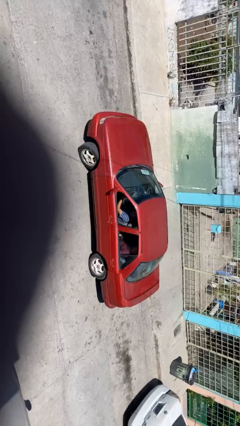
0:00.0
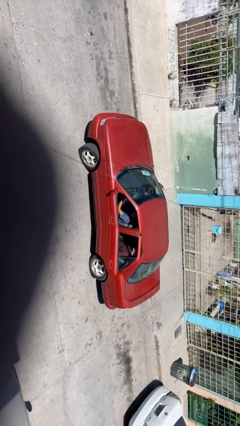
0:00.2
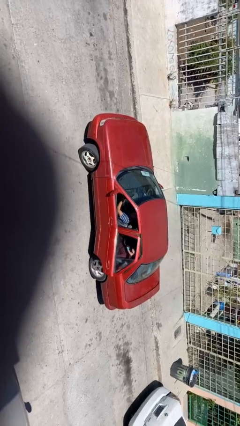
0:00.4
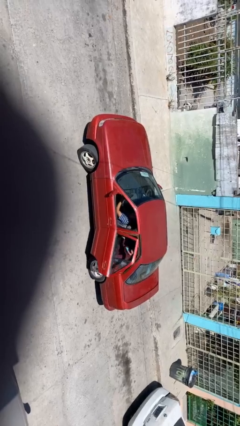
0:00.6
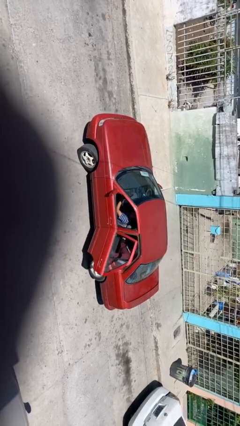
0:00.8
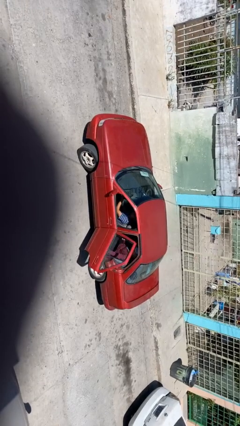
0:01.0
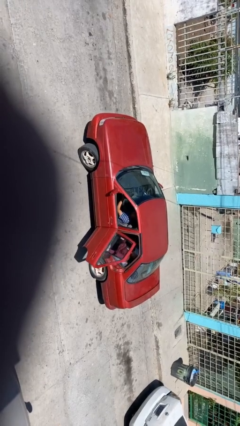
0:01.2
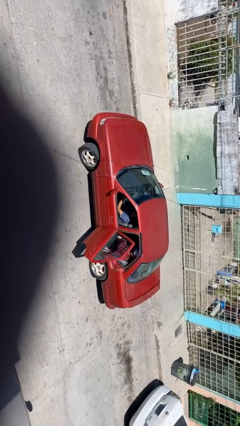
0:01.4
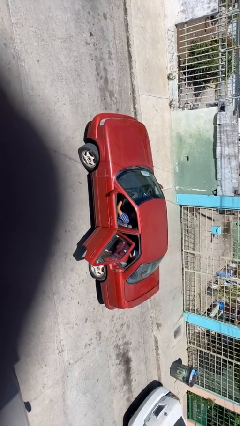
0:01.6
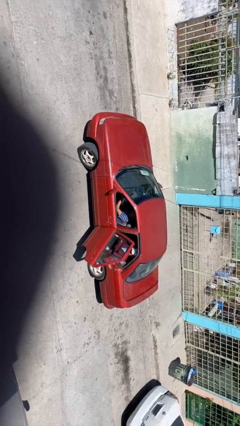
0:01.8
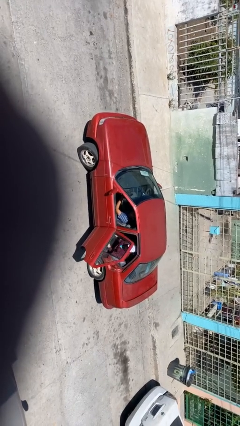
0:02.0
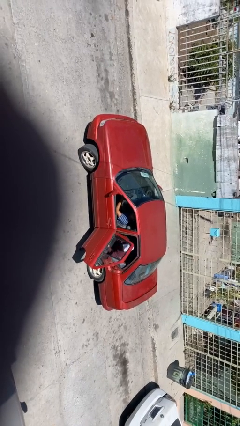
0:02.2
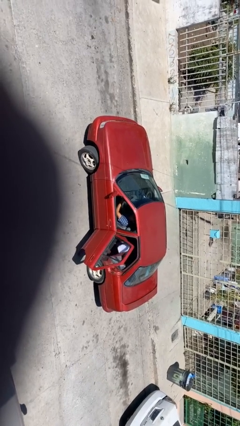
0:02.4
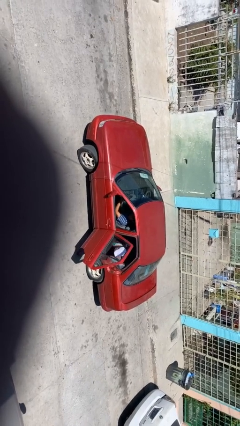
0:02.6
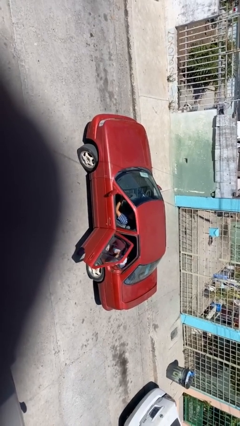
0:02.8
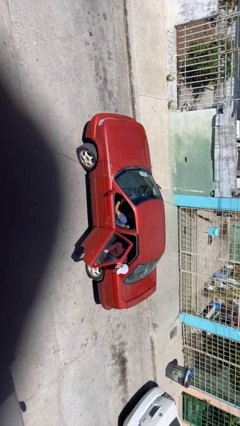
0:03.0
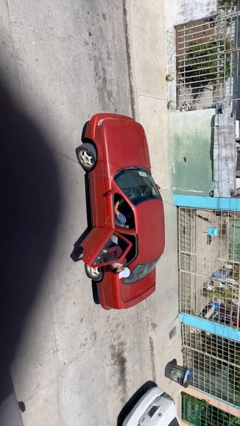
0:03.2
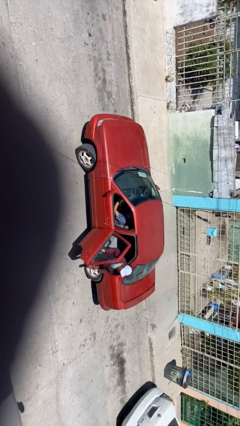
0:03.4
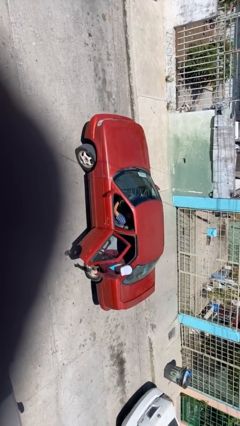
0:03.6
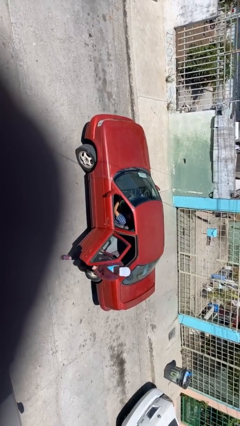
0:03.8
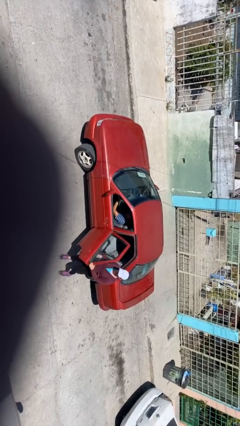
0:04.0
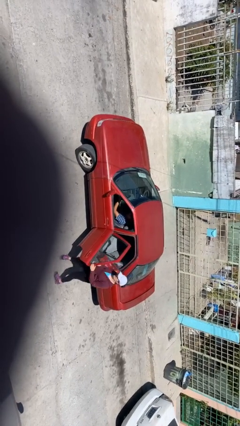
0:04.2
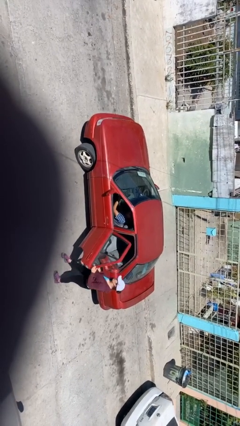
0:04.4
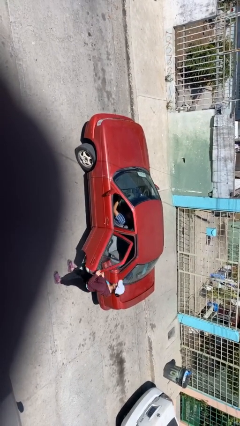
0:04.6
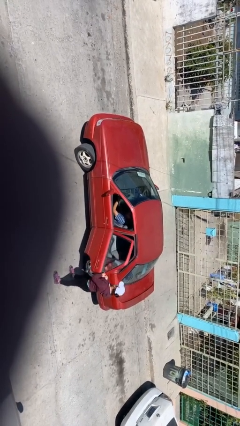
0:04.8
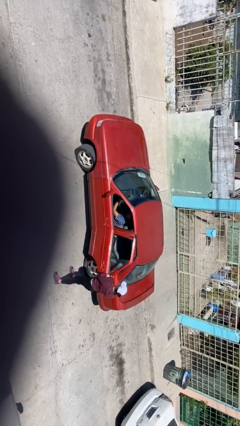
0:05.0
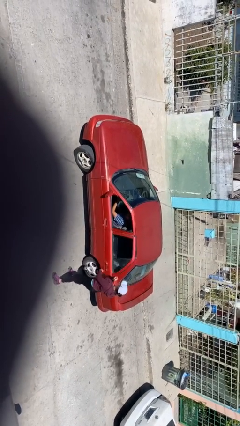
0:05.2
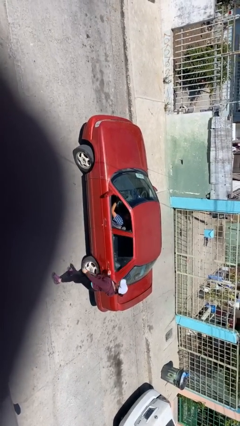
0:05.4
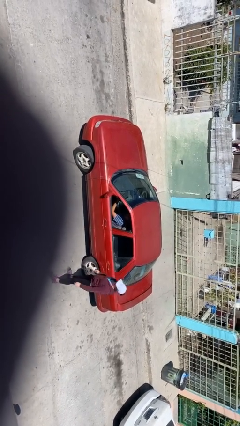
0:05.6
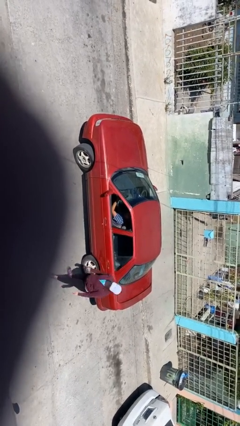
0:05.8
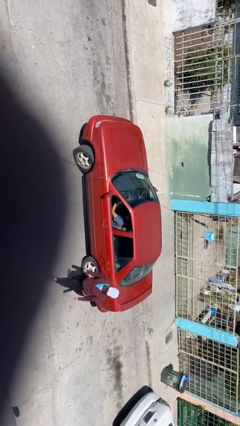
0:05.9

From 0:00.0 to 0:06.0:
car drops off person

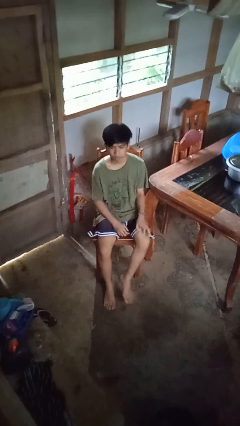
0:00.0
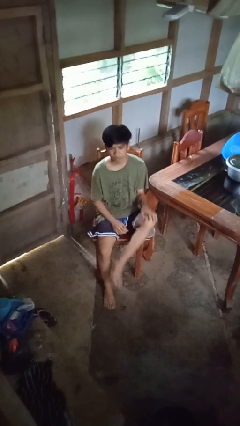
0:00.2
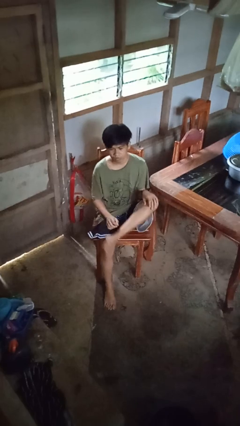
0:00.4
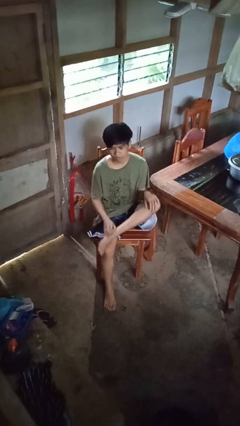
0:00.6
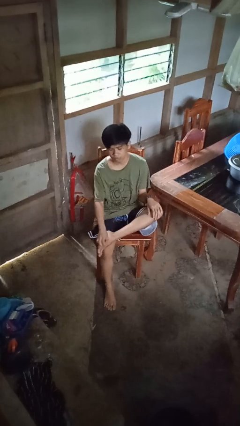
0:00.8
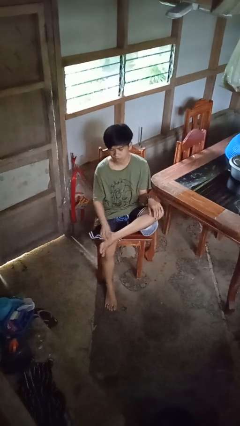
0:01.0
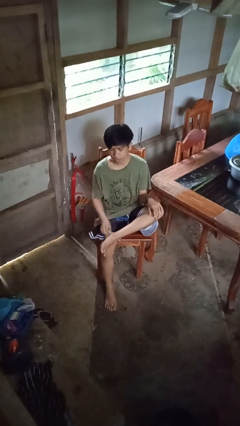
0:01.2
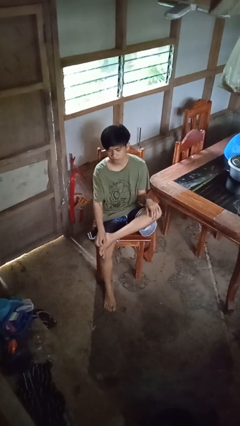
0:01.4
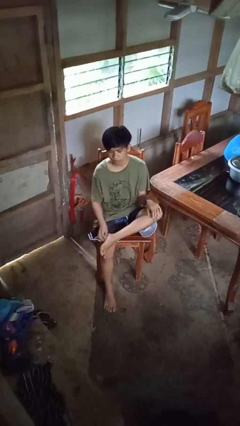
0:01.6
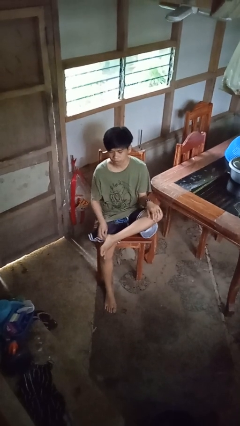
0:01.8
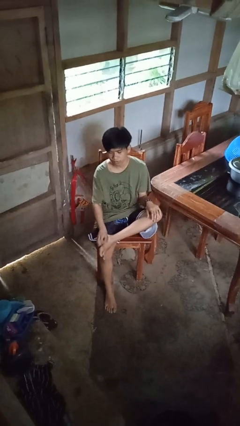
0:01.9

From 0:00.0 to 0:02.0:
person rubs foot

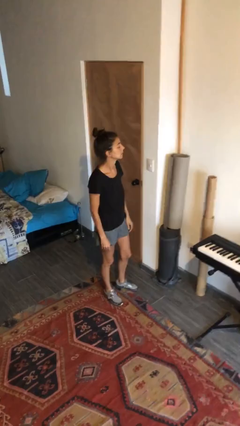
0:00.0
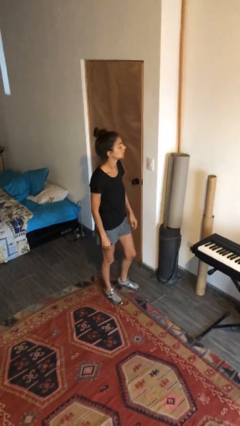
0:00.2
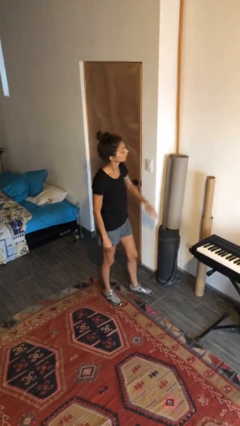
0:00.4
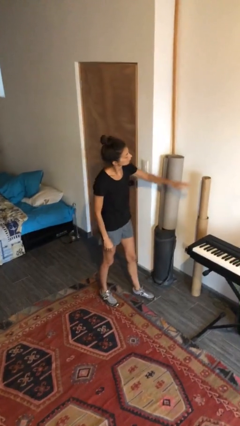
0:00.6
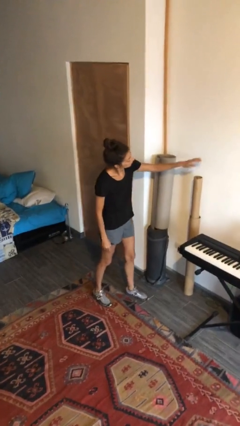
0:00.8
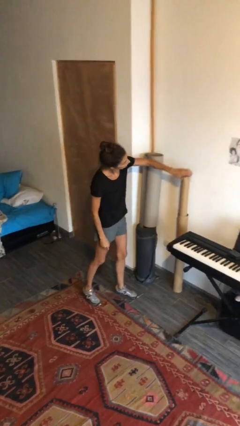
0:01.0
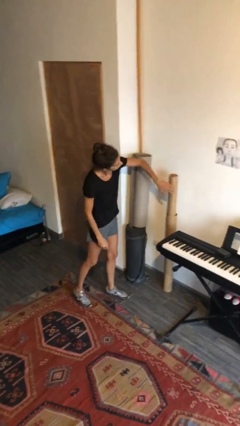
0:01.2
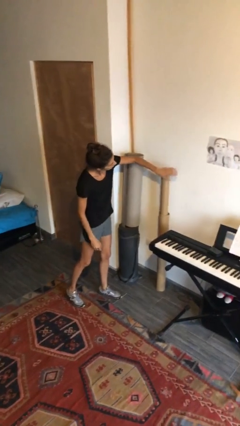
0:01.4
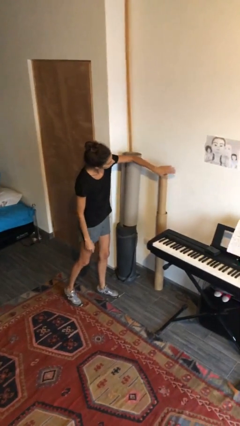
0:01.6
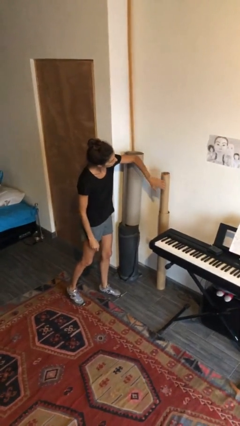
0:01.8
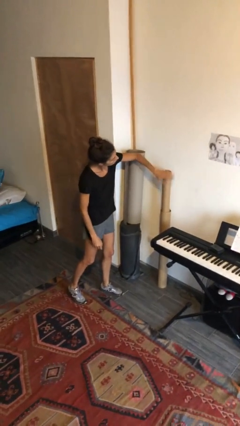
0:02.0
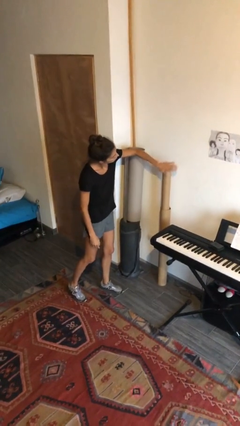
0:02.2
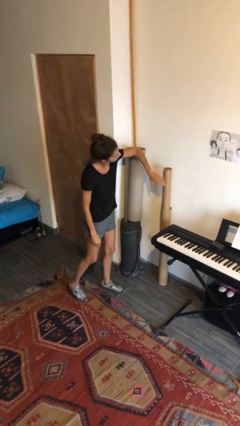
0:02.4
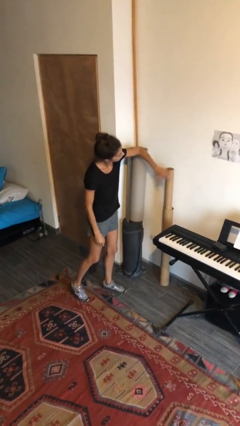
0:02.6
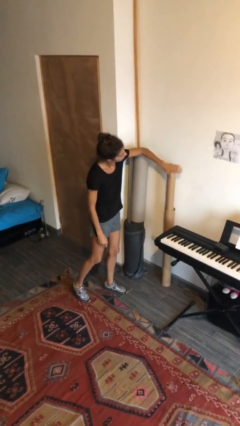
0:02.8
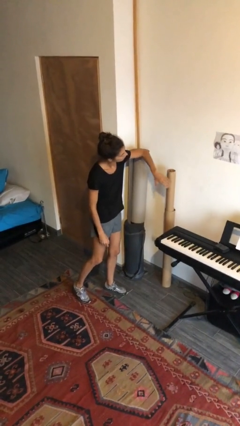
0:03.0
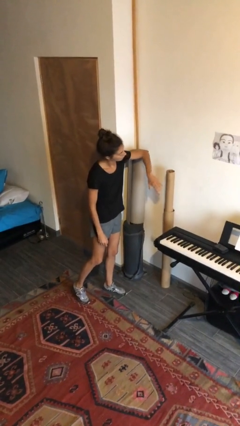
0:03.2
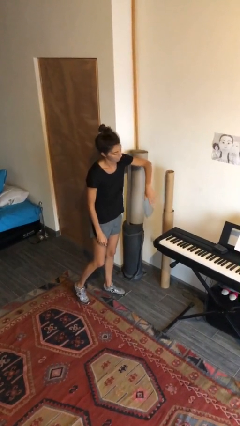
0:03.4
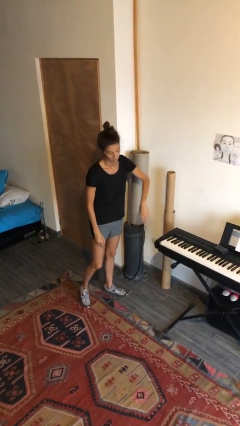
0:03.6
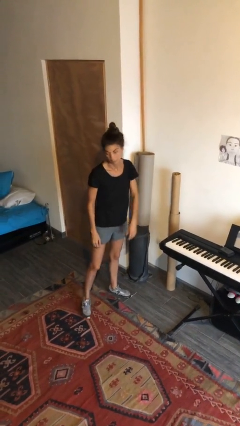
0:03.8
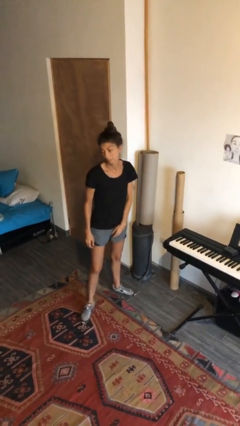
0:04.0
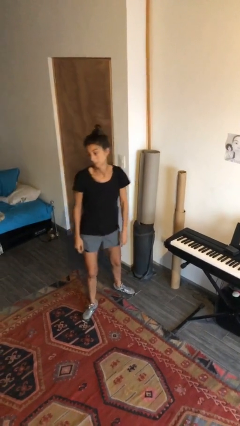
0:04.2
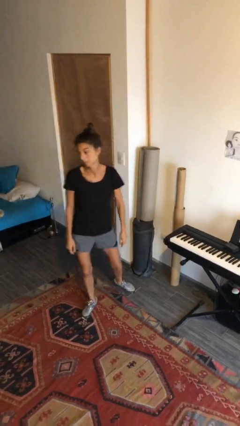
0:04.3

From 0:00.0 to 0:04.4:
person waves hand over object

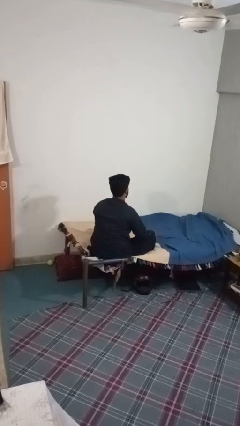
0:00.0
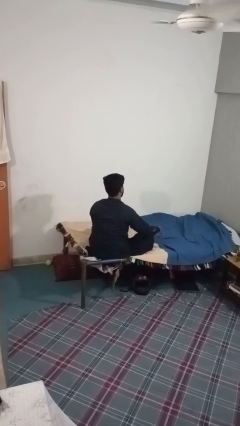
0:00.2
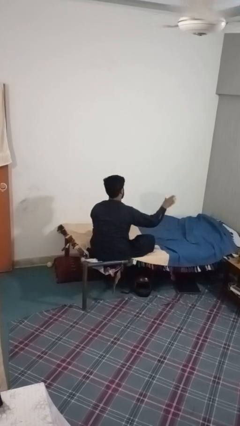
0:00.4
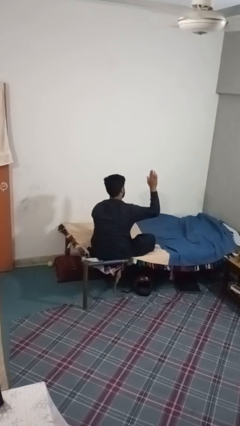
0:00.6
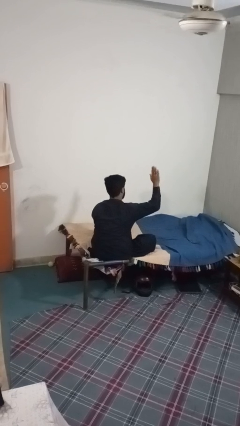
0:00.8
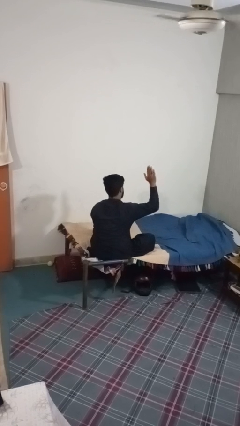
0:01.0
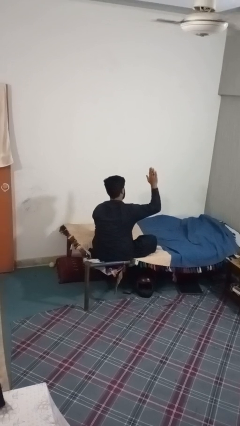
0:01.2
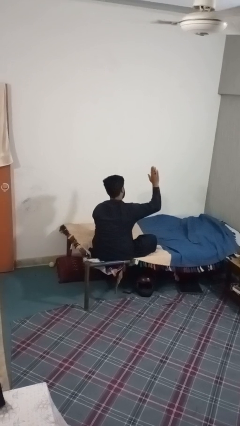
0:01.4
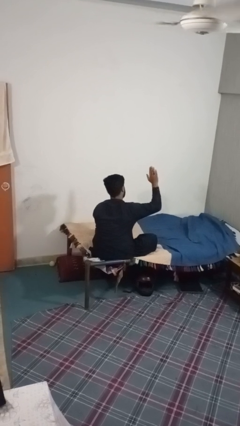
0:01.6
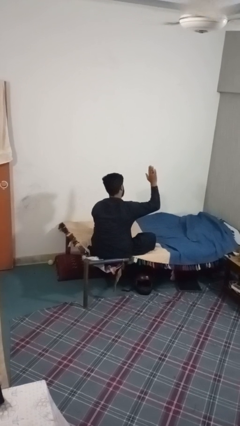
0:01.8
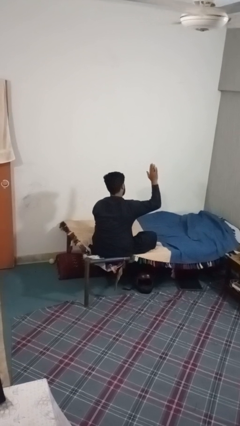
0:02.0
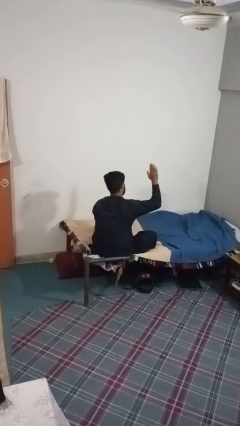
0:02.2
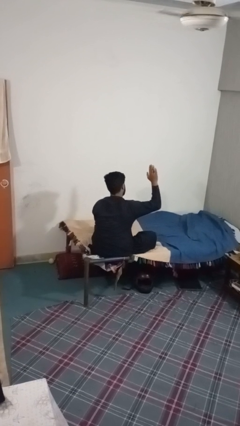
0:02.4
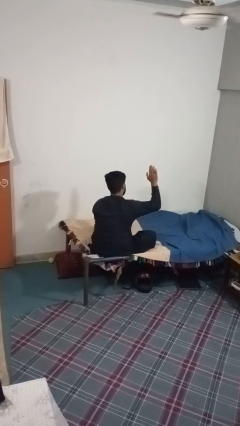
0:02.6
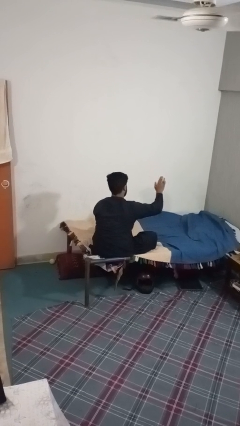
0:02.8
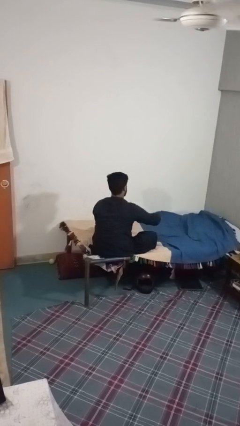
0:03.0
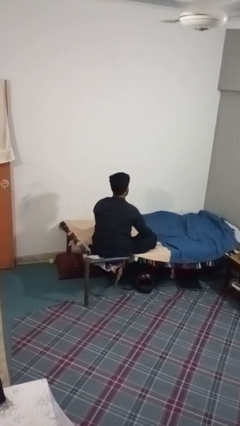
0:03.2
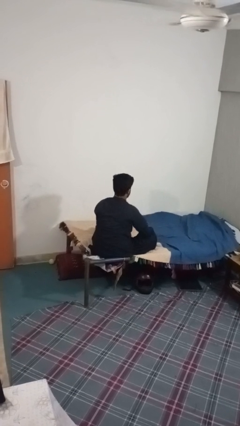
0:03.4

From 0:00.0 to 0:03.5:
person gestures stop

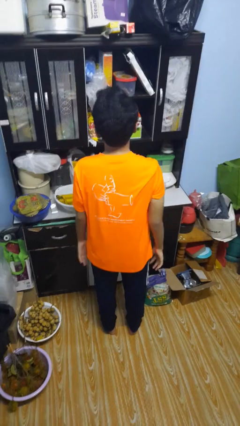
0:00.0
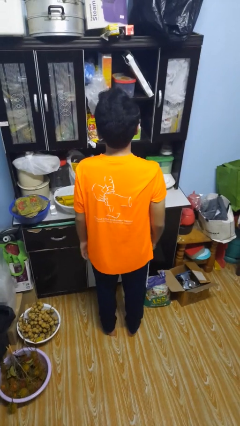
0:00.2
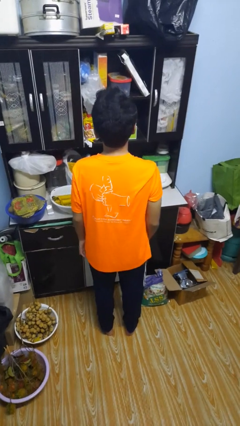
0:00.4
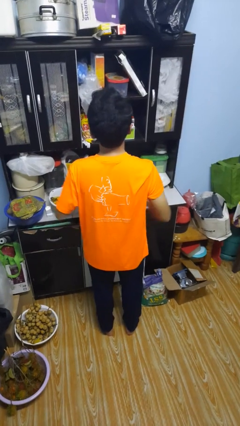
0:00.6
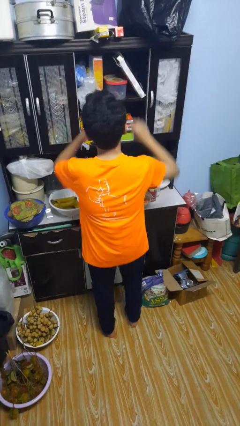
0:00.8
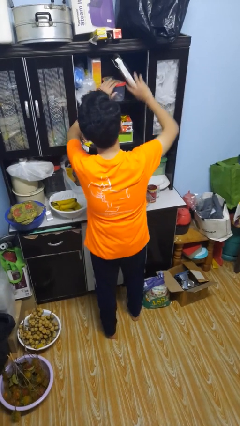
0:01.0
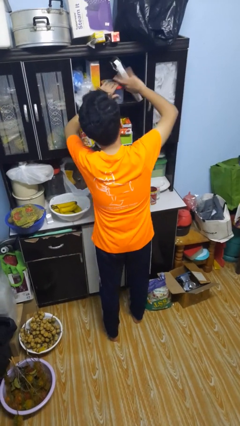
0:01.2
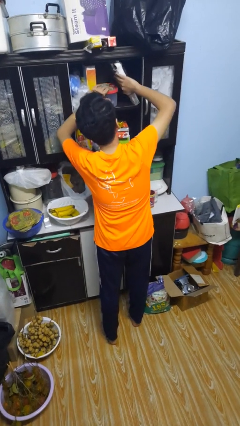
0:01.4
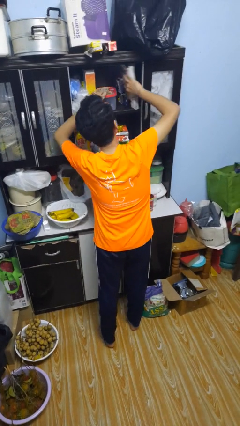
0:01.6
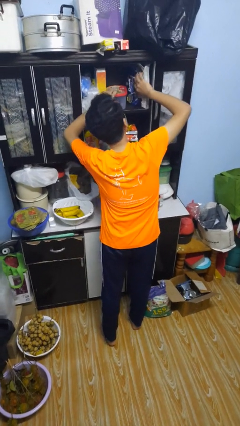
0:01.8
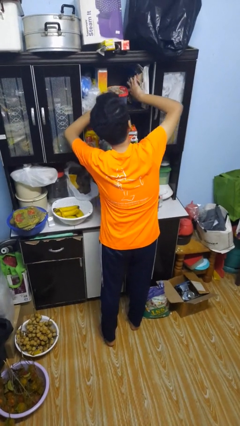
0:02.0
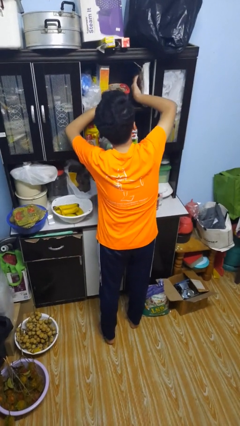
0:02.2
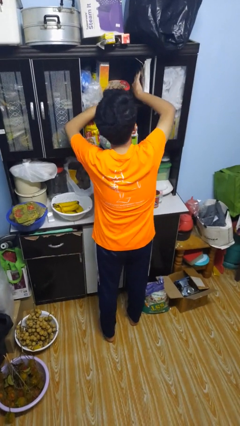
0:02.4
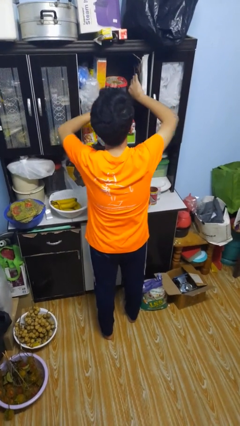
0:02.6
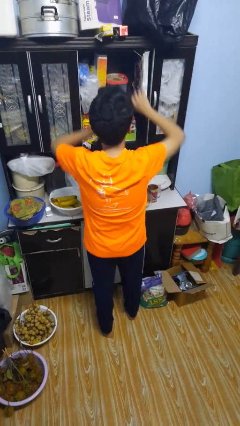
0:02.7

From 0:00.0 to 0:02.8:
person searches in cabinet
